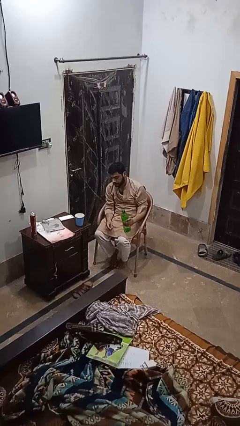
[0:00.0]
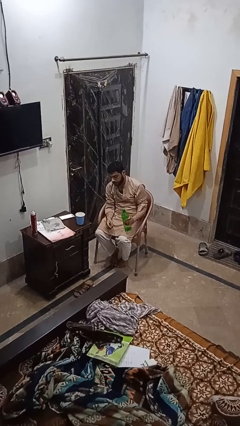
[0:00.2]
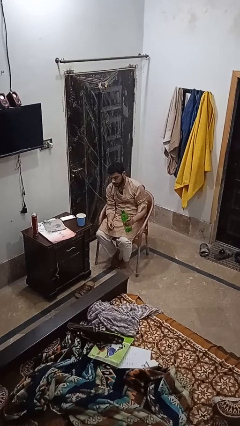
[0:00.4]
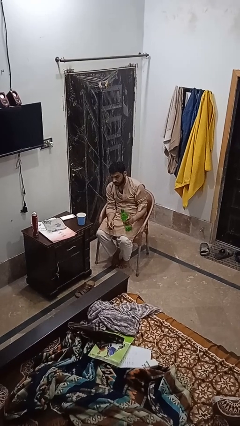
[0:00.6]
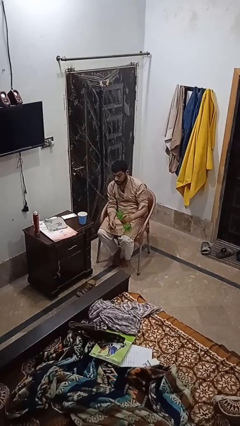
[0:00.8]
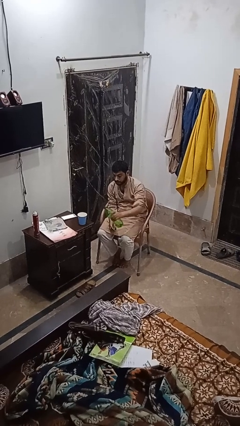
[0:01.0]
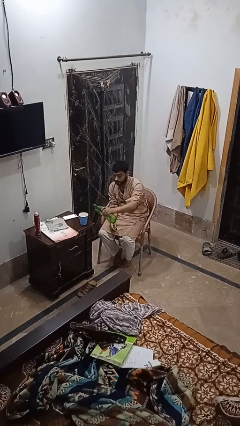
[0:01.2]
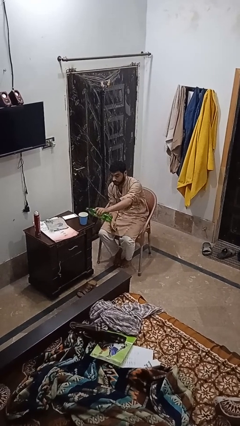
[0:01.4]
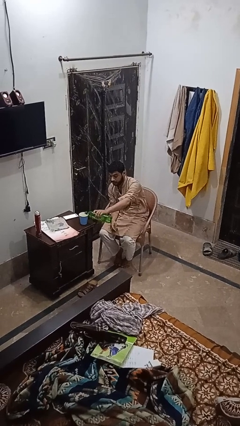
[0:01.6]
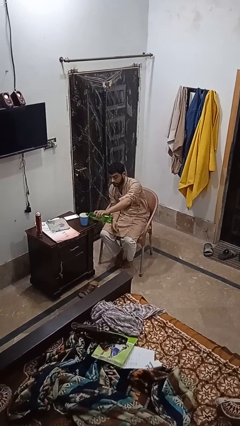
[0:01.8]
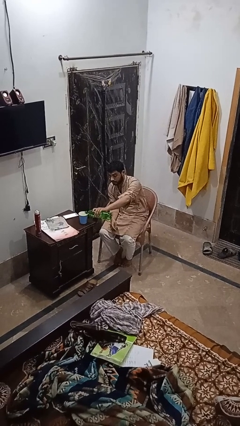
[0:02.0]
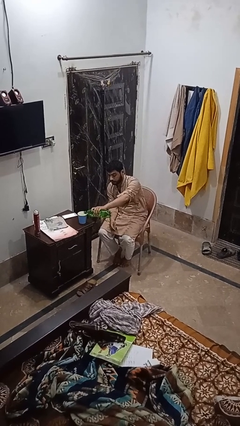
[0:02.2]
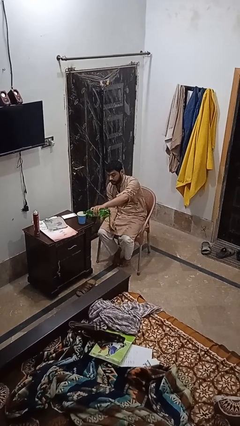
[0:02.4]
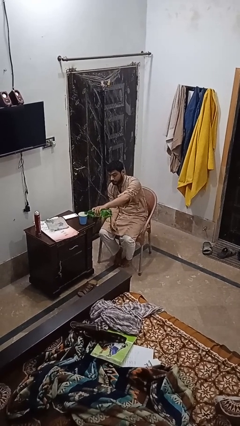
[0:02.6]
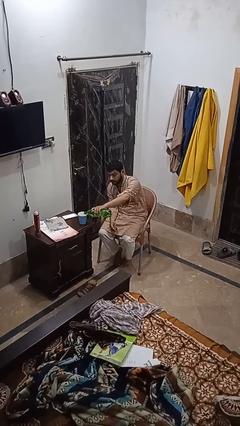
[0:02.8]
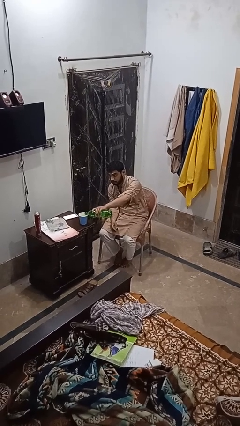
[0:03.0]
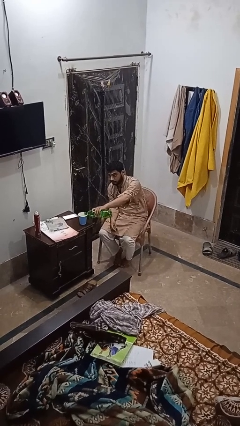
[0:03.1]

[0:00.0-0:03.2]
person pours liquid into cup

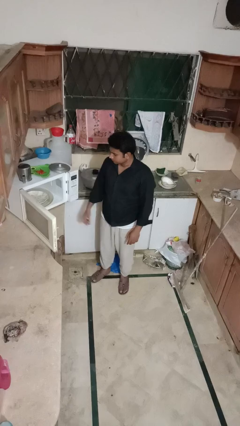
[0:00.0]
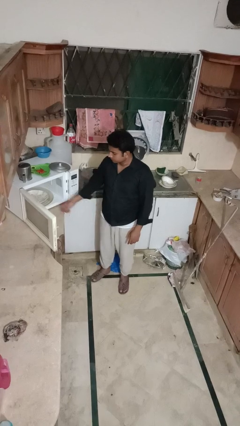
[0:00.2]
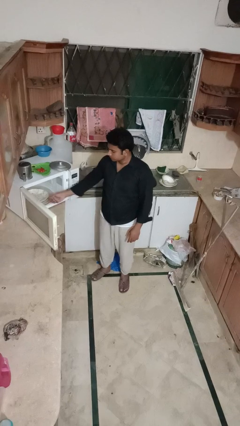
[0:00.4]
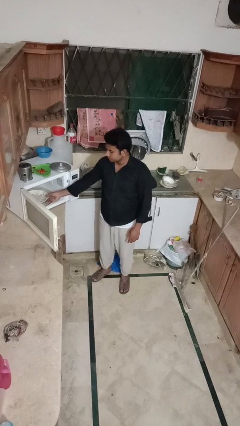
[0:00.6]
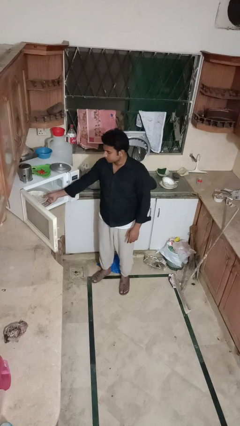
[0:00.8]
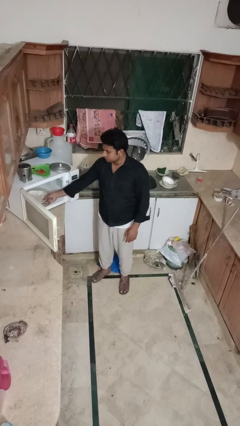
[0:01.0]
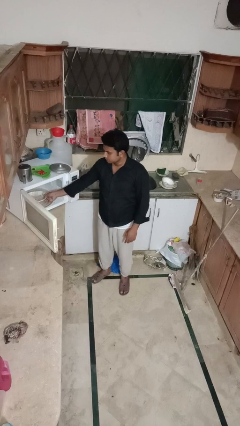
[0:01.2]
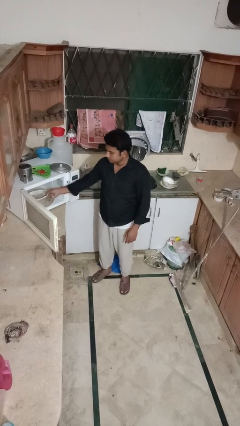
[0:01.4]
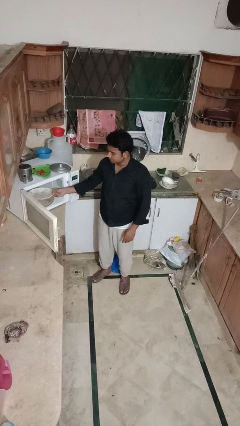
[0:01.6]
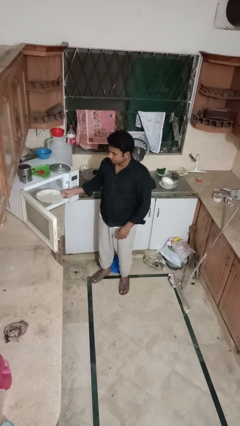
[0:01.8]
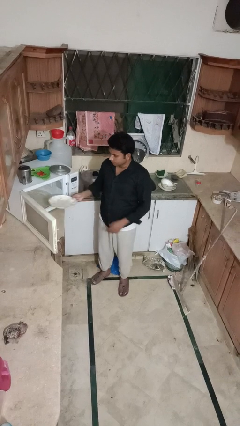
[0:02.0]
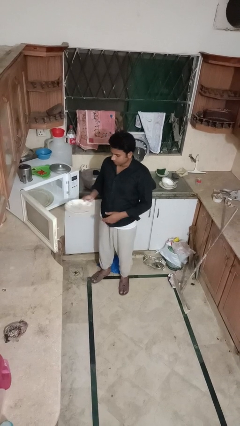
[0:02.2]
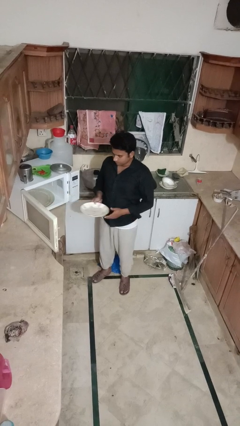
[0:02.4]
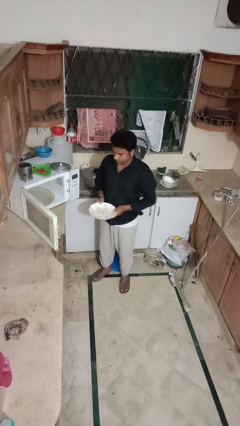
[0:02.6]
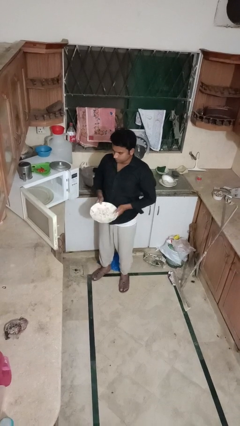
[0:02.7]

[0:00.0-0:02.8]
person takes object from microwave

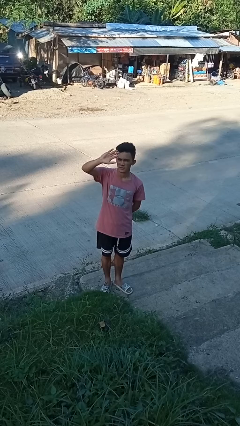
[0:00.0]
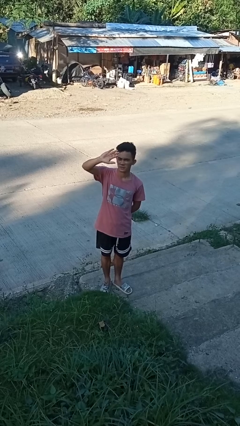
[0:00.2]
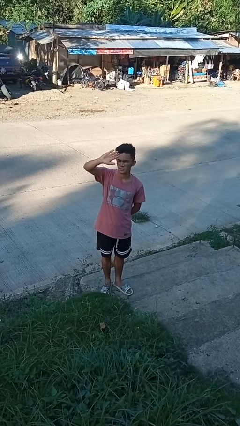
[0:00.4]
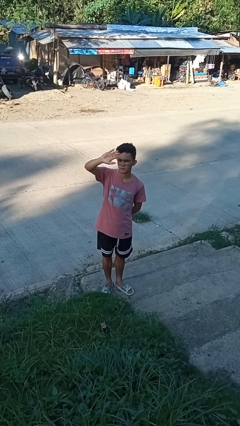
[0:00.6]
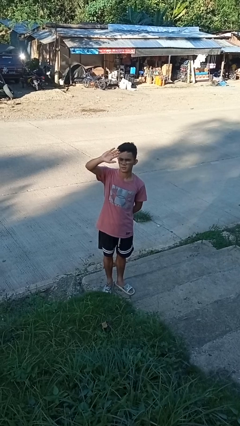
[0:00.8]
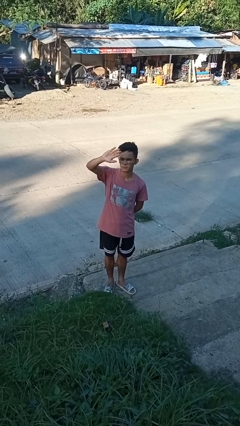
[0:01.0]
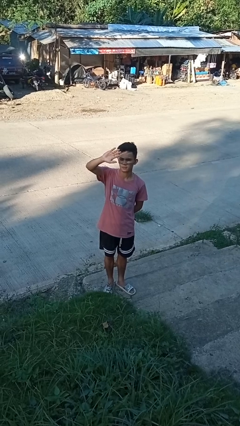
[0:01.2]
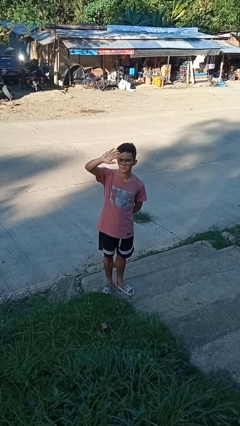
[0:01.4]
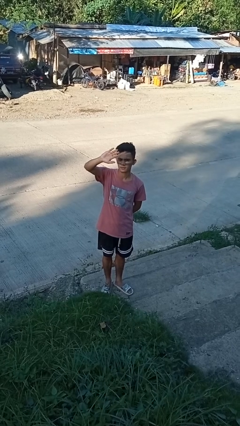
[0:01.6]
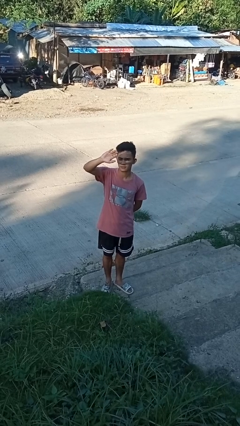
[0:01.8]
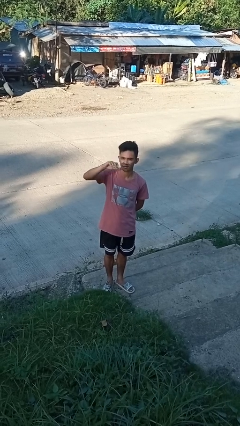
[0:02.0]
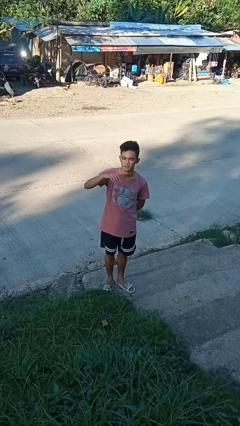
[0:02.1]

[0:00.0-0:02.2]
person shades eyes

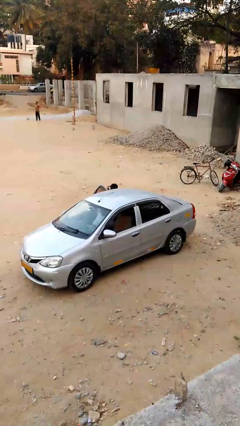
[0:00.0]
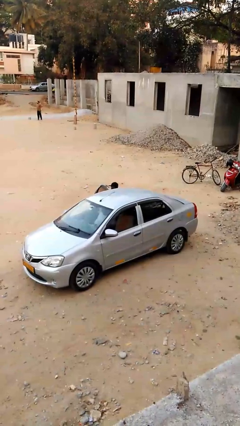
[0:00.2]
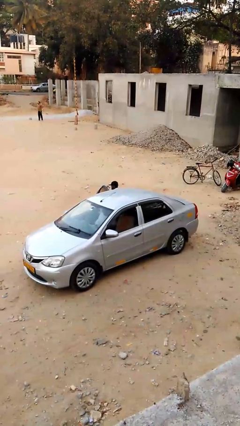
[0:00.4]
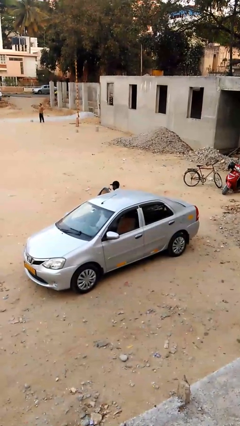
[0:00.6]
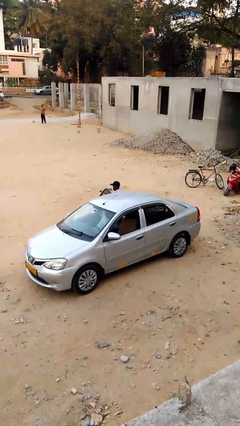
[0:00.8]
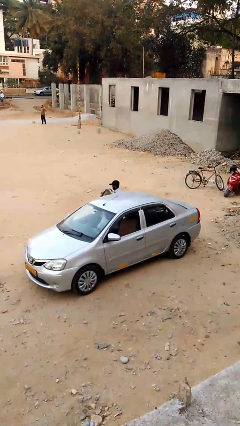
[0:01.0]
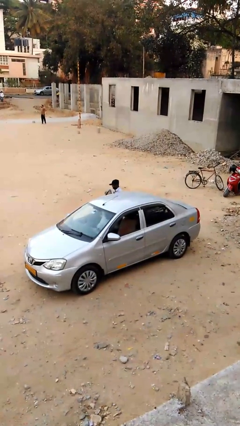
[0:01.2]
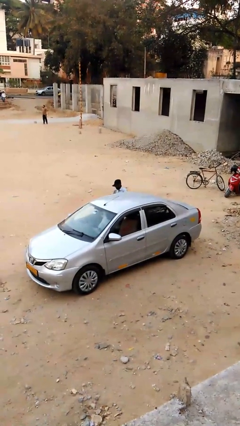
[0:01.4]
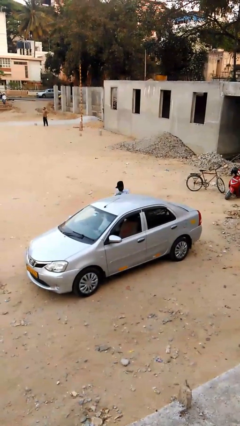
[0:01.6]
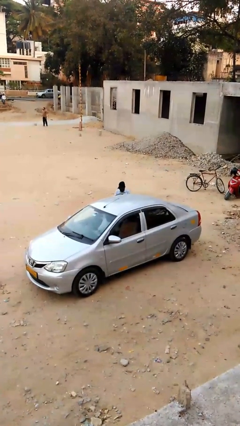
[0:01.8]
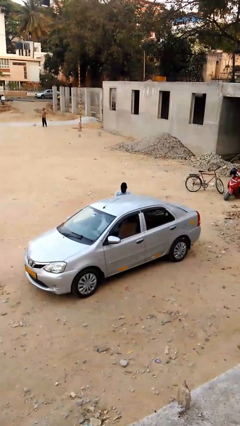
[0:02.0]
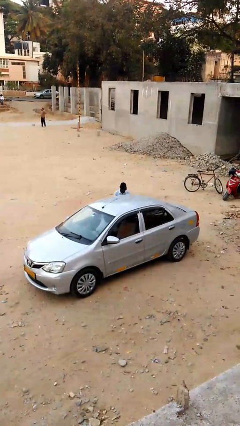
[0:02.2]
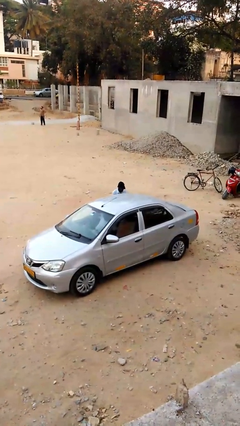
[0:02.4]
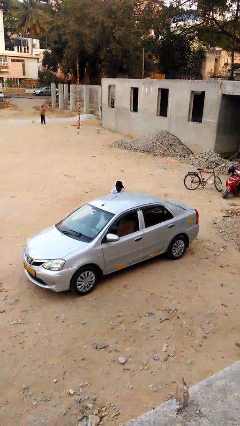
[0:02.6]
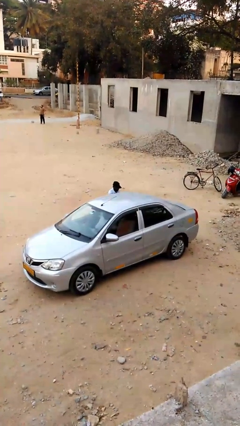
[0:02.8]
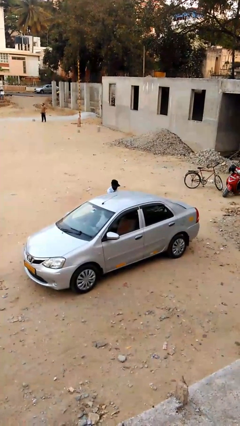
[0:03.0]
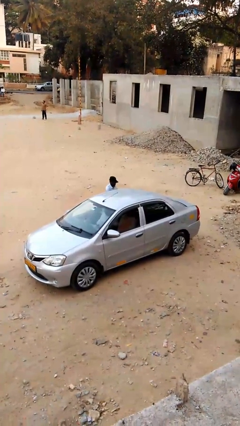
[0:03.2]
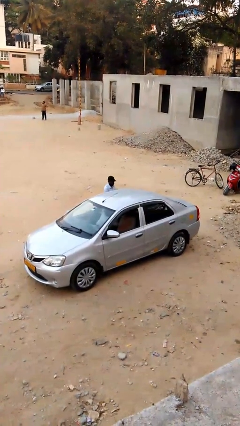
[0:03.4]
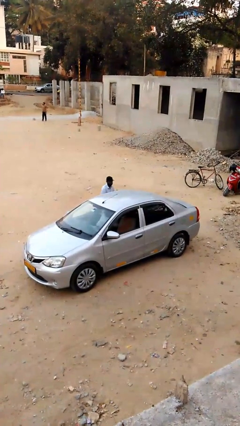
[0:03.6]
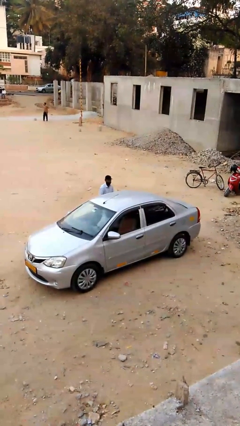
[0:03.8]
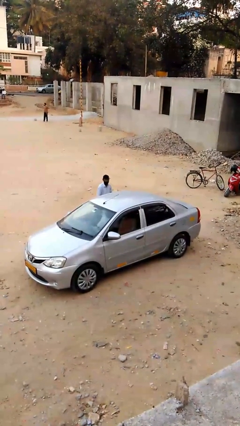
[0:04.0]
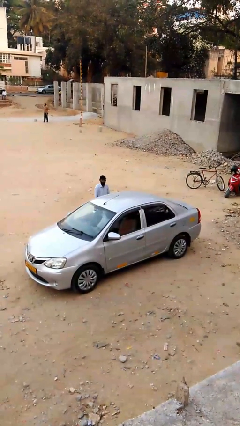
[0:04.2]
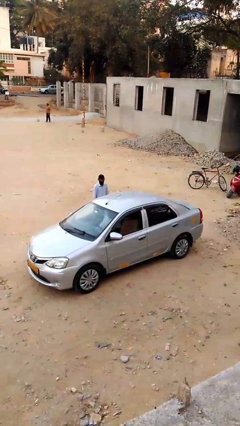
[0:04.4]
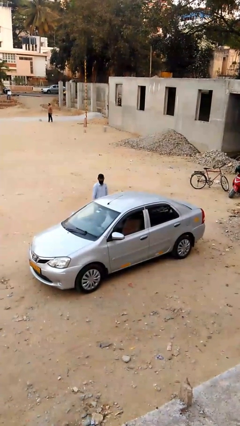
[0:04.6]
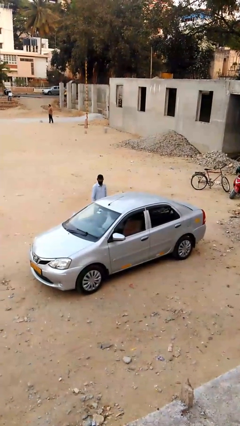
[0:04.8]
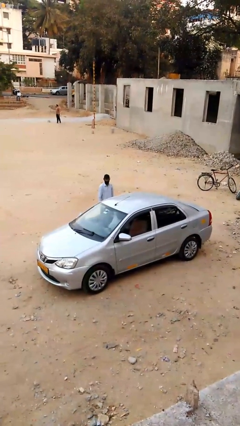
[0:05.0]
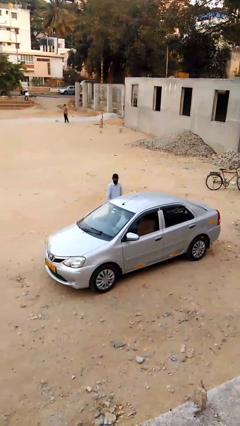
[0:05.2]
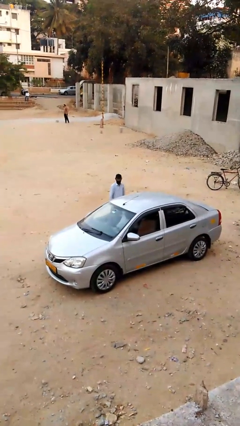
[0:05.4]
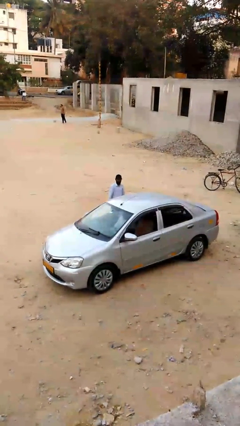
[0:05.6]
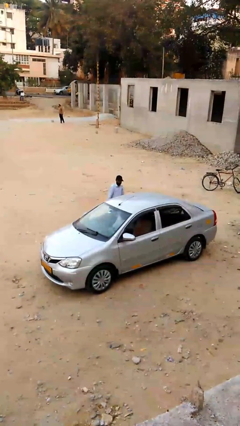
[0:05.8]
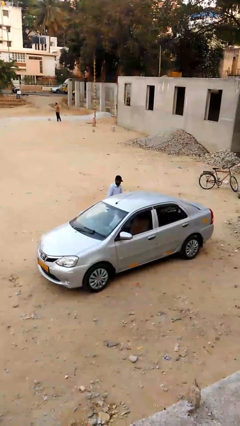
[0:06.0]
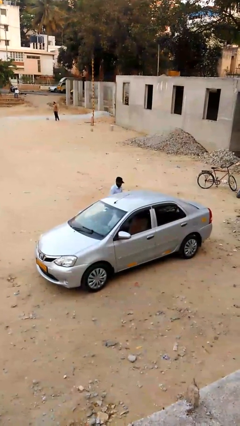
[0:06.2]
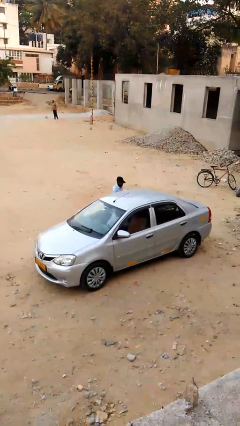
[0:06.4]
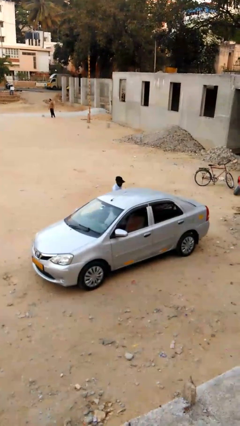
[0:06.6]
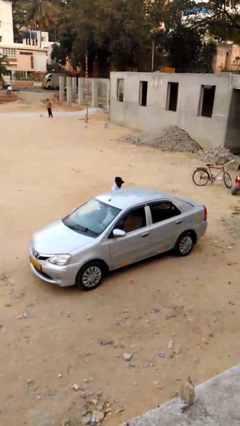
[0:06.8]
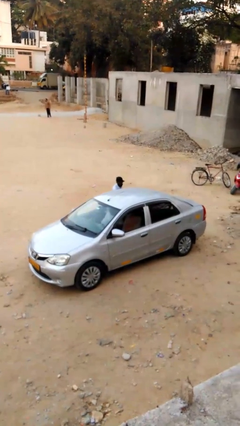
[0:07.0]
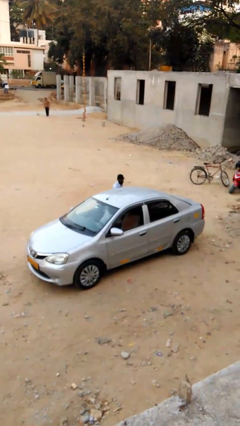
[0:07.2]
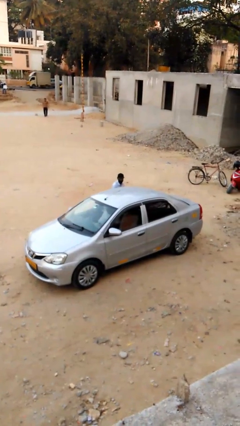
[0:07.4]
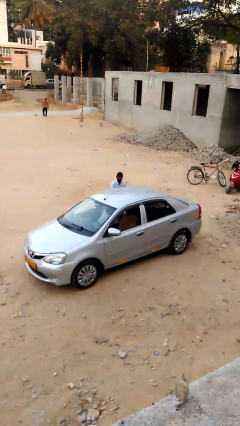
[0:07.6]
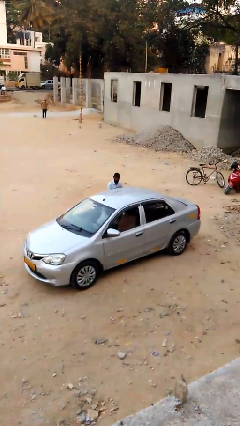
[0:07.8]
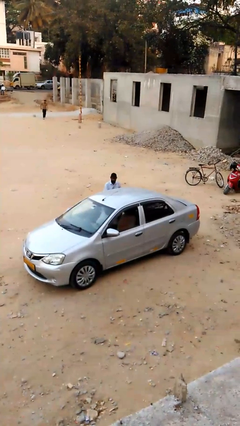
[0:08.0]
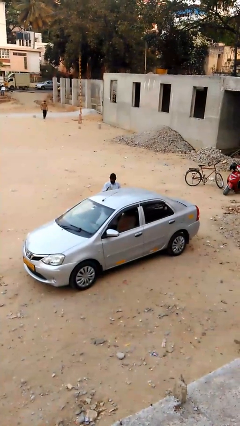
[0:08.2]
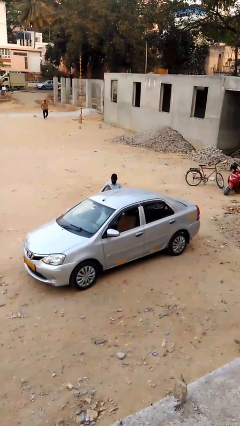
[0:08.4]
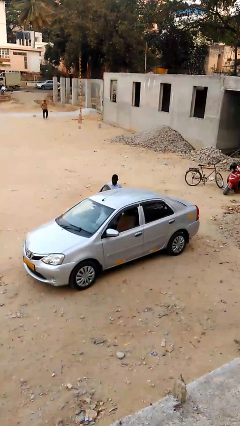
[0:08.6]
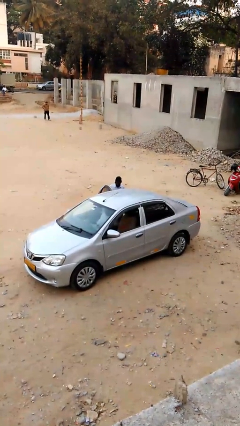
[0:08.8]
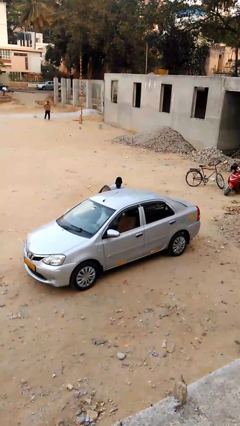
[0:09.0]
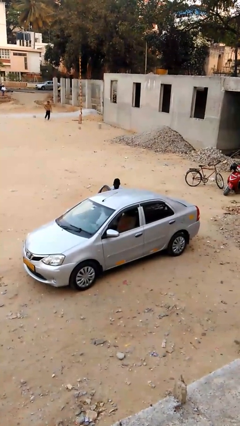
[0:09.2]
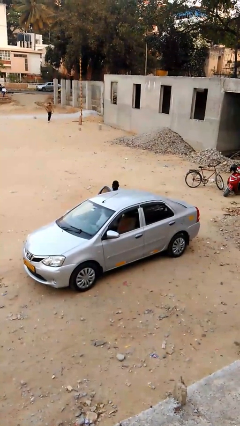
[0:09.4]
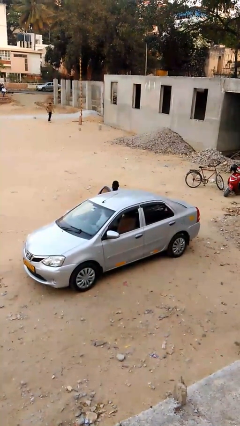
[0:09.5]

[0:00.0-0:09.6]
person exits car
